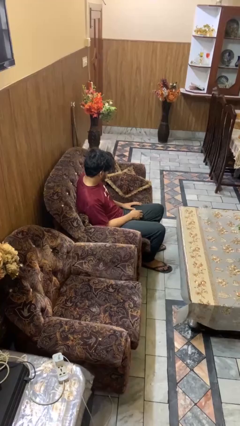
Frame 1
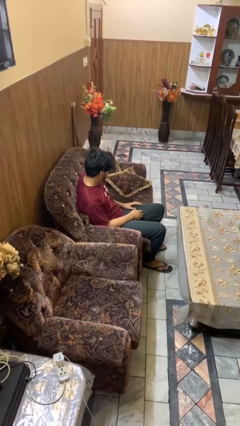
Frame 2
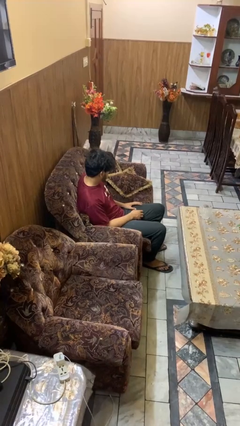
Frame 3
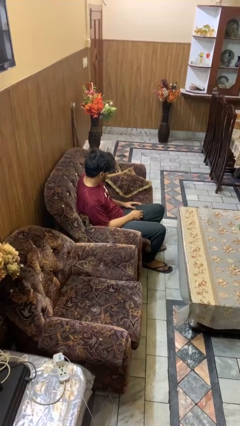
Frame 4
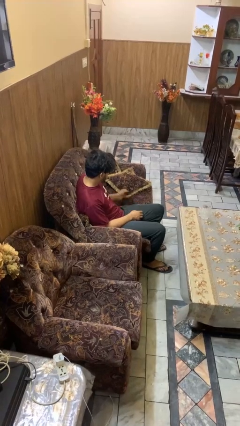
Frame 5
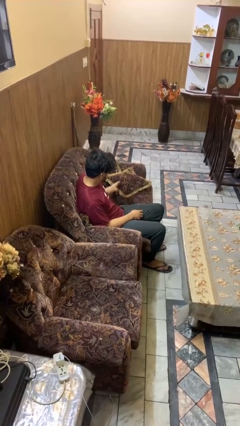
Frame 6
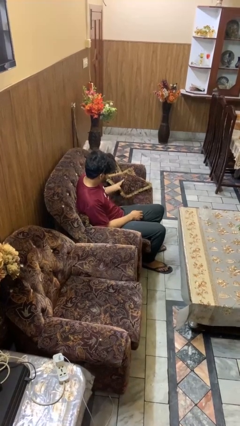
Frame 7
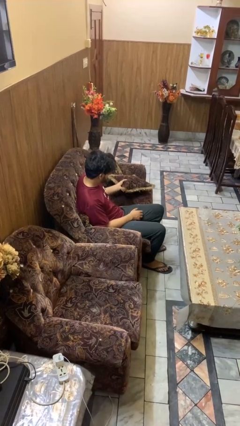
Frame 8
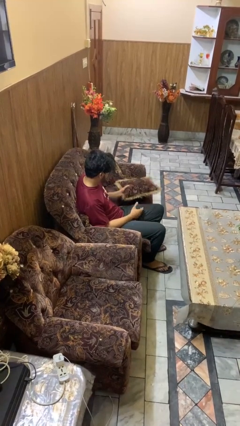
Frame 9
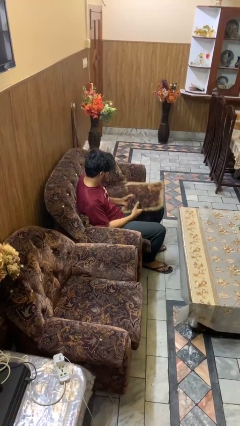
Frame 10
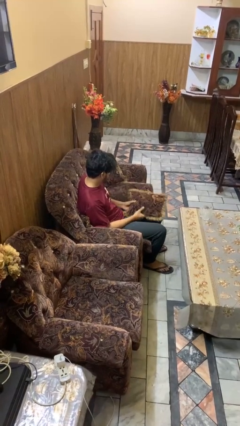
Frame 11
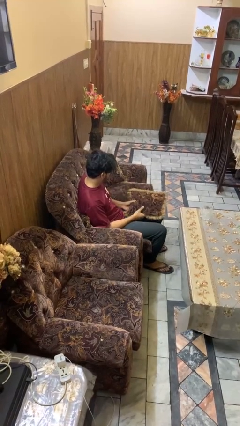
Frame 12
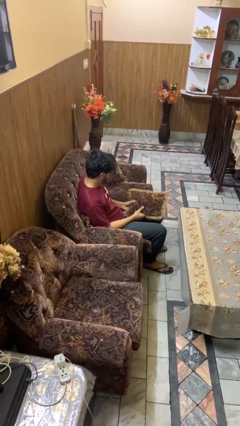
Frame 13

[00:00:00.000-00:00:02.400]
person picks up object from couch

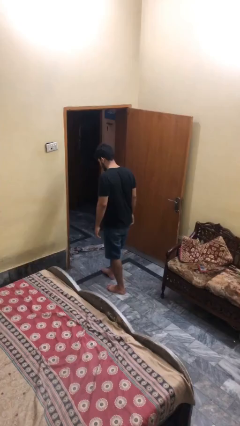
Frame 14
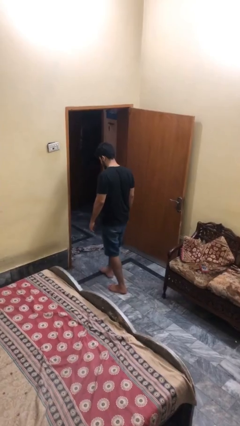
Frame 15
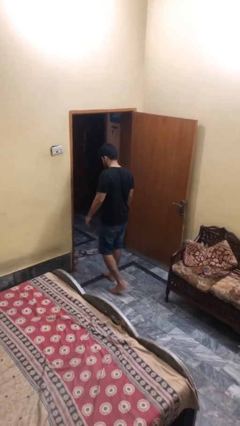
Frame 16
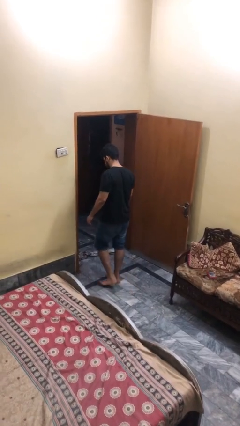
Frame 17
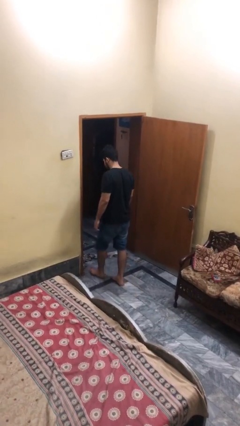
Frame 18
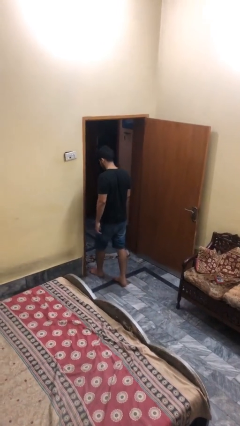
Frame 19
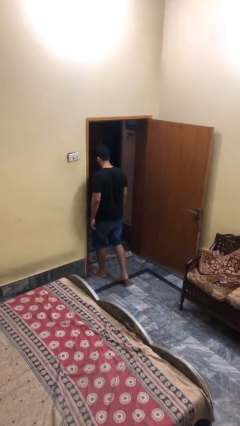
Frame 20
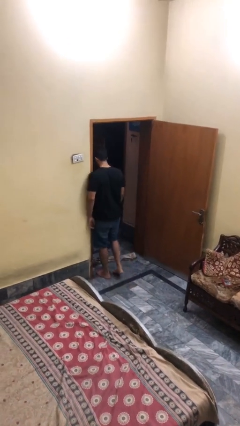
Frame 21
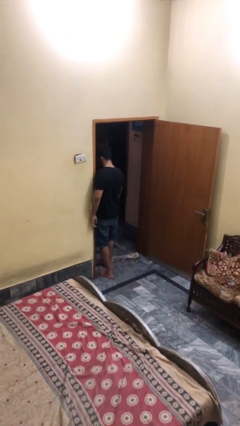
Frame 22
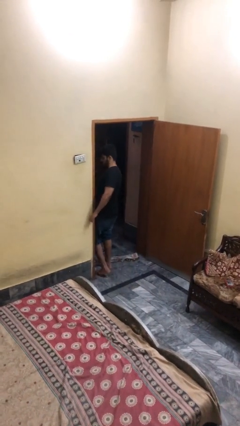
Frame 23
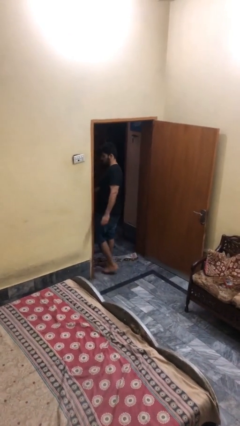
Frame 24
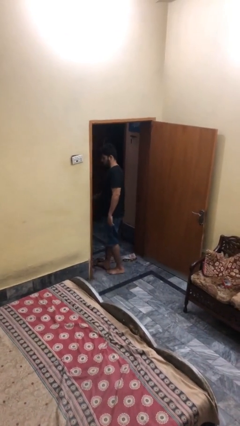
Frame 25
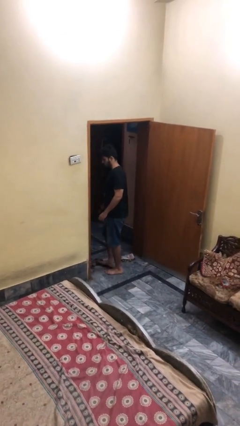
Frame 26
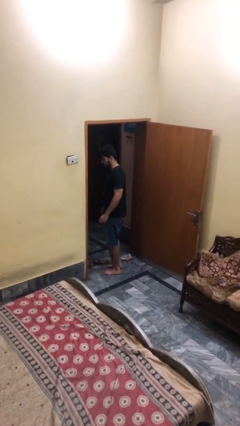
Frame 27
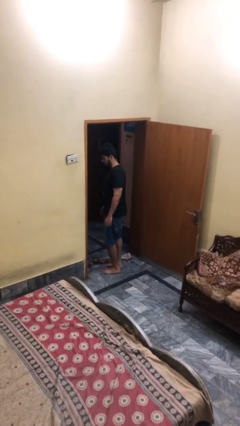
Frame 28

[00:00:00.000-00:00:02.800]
person bumps into wall

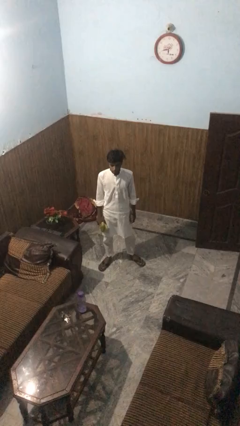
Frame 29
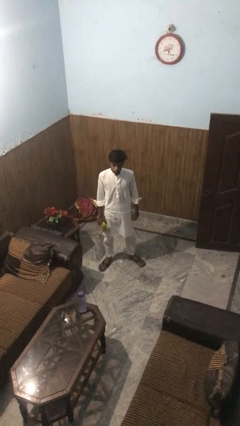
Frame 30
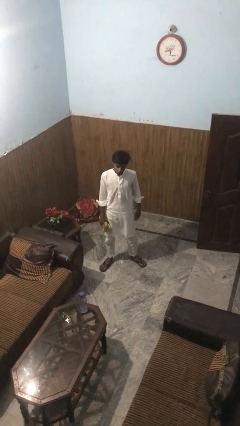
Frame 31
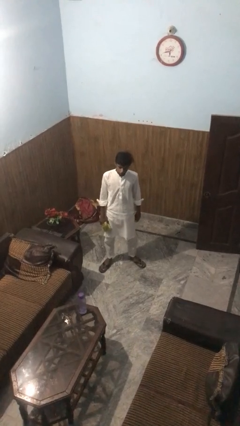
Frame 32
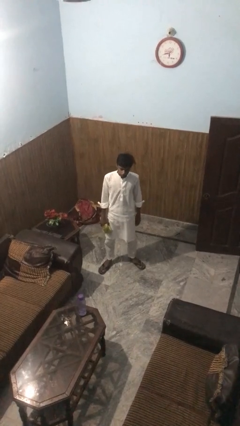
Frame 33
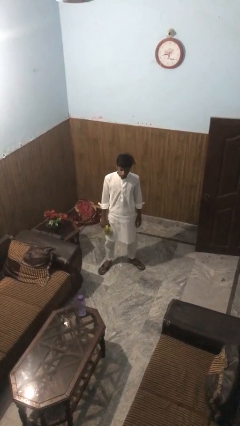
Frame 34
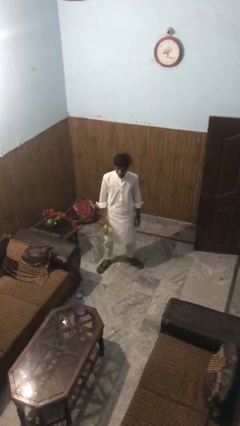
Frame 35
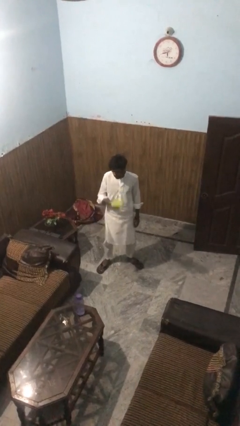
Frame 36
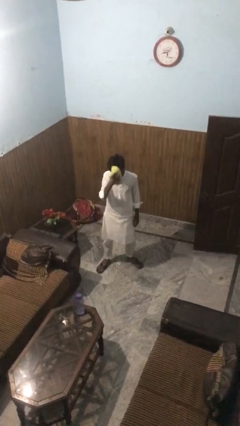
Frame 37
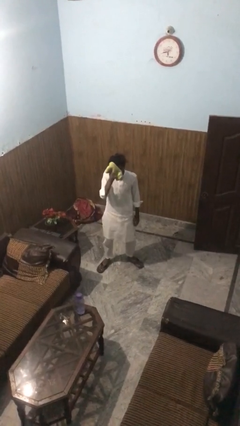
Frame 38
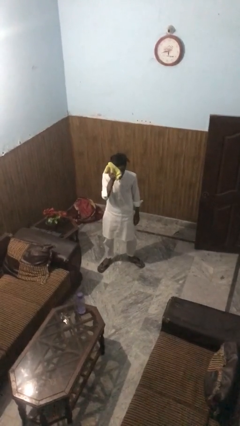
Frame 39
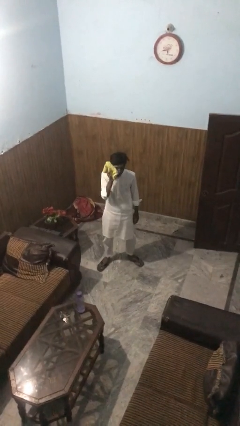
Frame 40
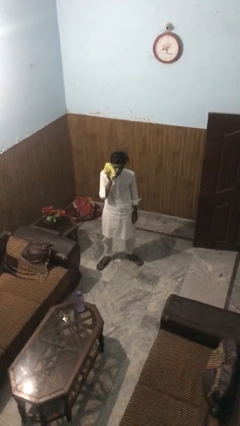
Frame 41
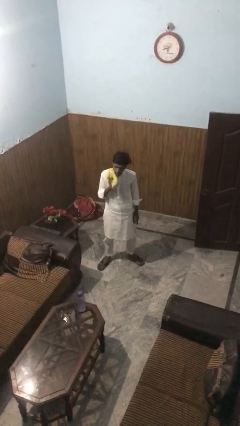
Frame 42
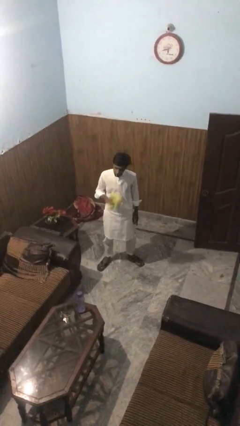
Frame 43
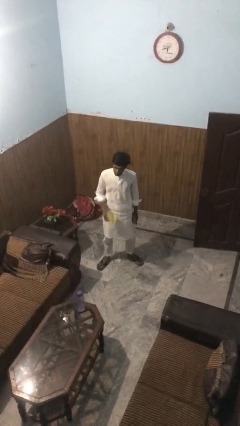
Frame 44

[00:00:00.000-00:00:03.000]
person wipes mouth with napkin

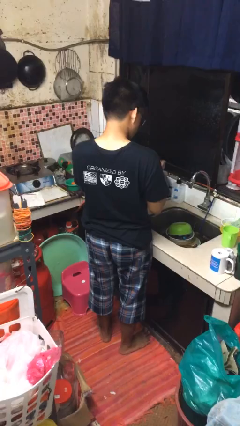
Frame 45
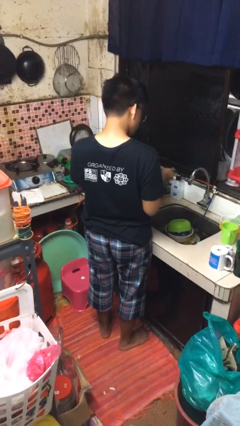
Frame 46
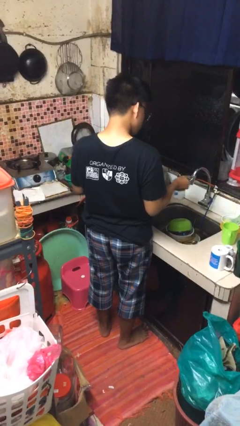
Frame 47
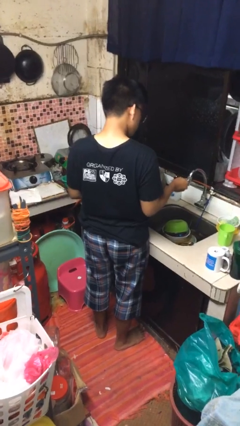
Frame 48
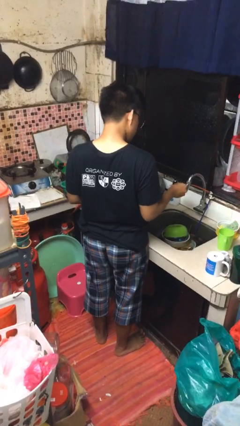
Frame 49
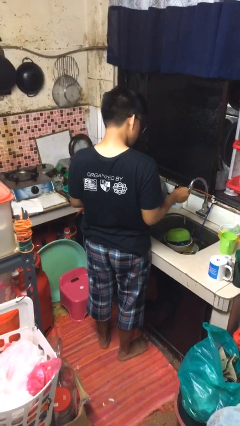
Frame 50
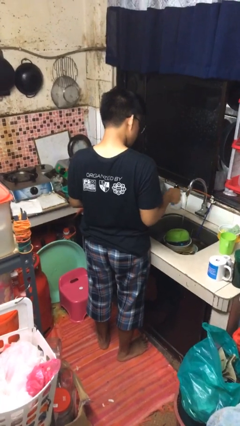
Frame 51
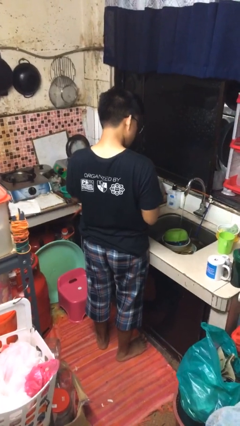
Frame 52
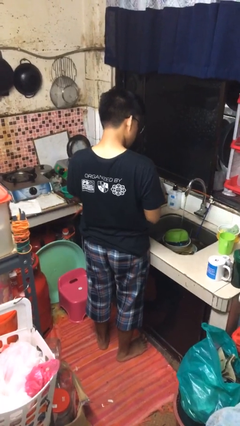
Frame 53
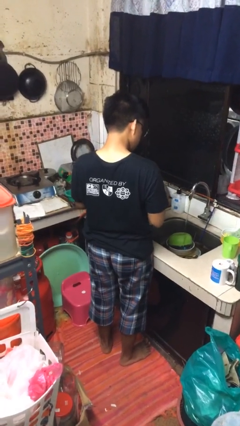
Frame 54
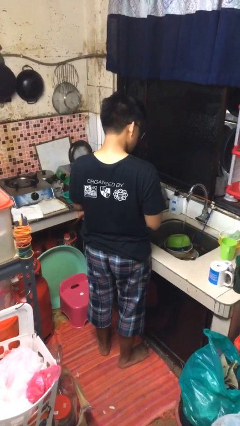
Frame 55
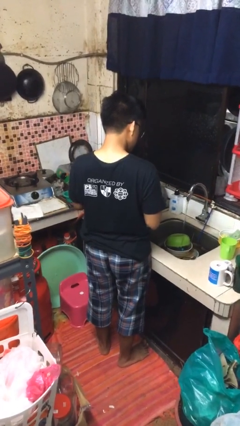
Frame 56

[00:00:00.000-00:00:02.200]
person turns on faucet

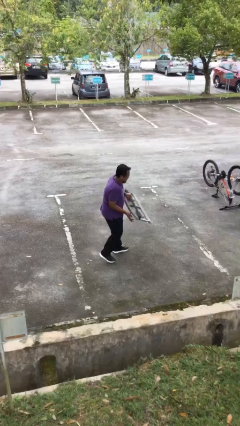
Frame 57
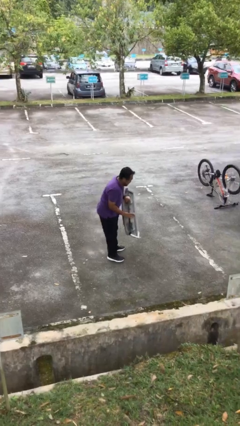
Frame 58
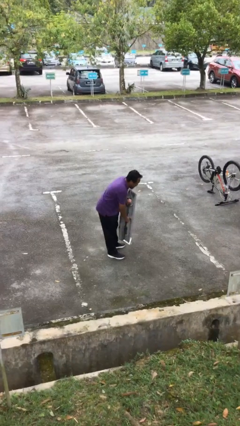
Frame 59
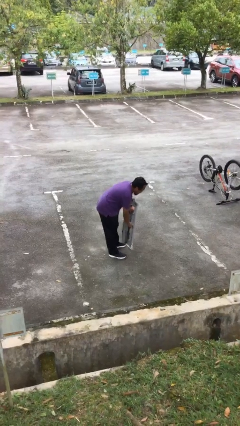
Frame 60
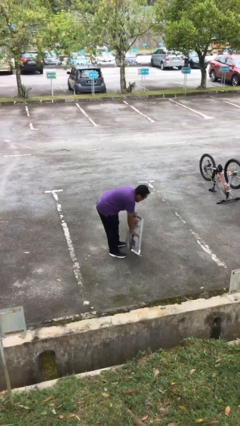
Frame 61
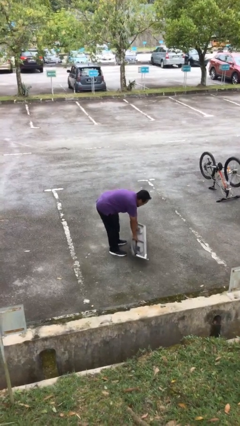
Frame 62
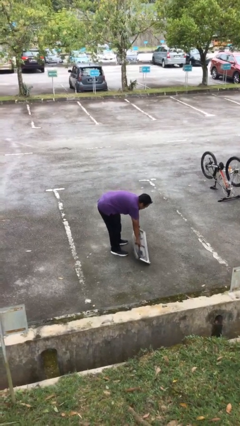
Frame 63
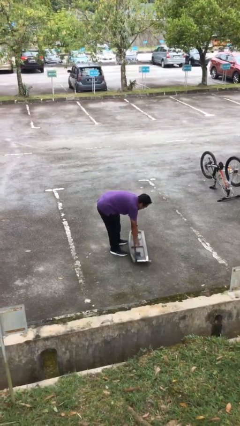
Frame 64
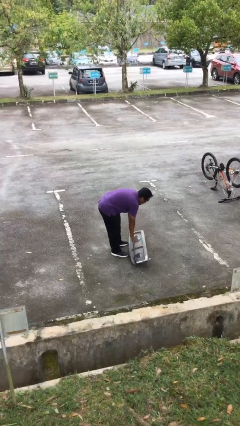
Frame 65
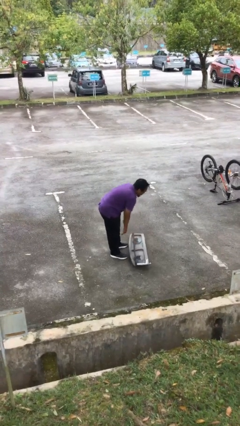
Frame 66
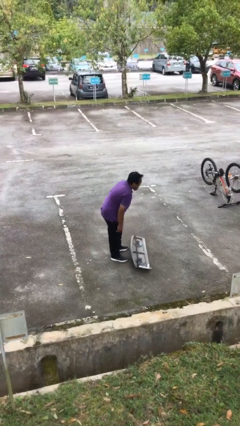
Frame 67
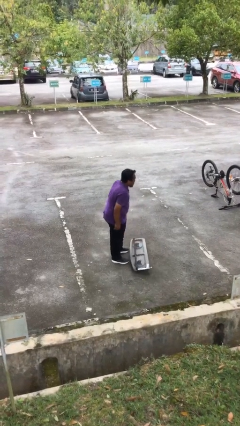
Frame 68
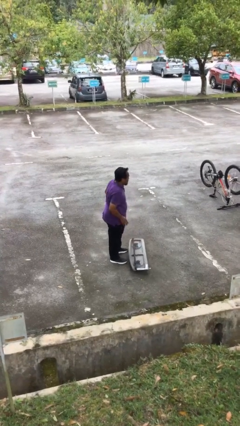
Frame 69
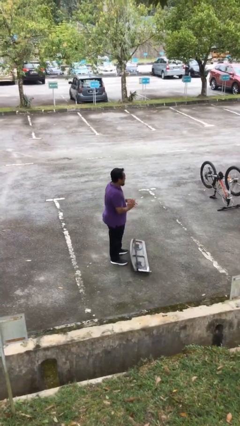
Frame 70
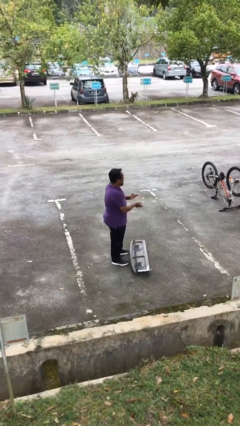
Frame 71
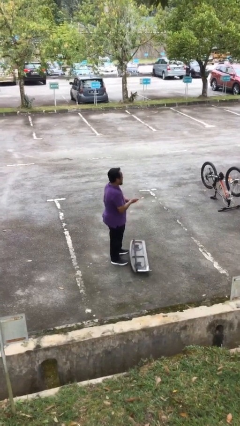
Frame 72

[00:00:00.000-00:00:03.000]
person puts down object on floor

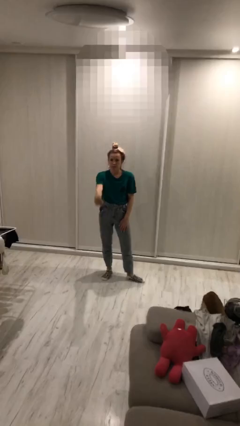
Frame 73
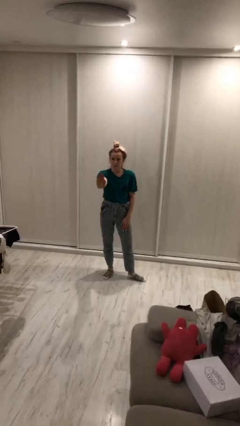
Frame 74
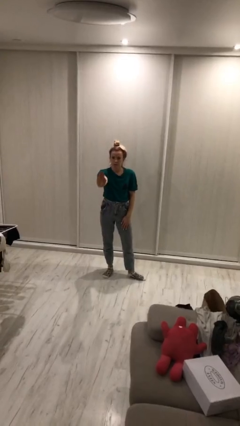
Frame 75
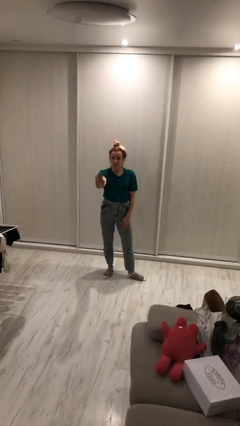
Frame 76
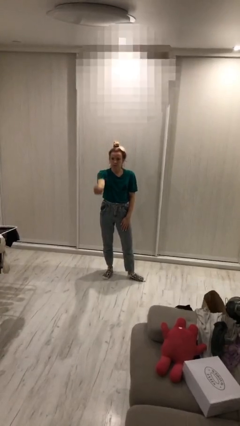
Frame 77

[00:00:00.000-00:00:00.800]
person gestures stop

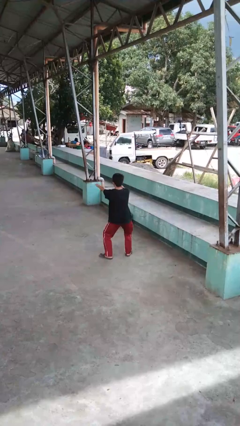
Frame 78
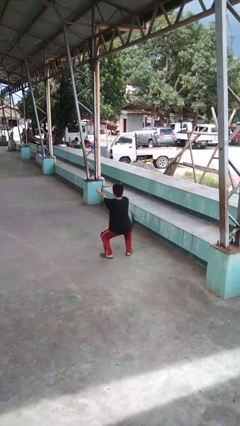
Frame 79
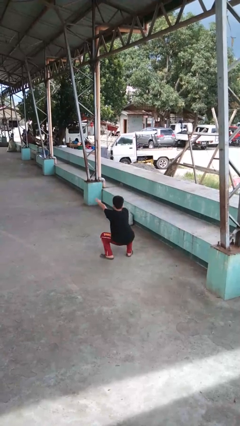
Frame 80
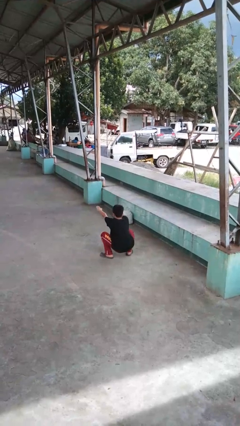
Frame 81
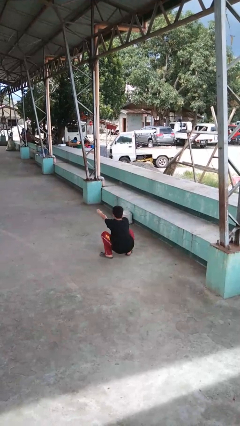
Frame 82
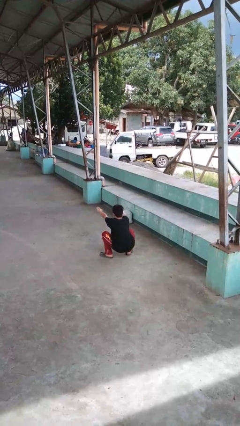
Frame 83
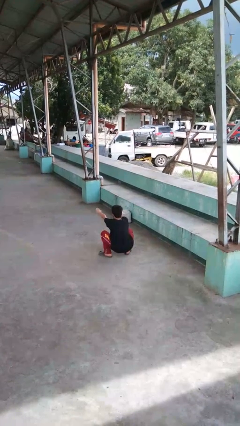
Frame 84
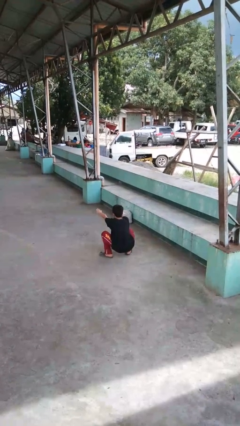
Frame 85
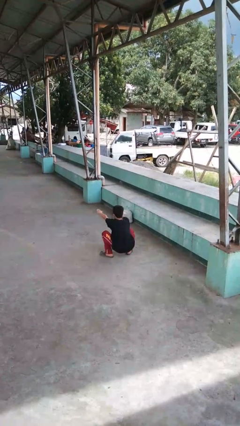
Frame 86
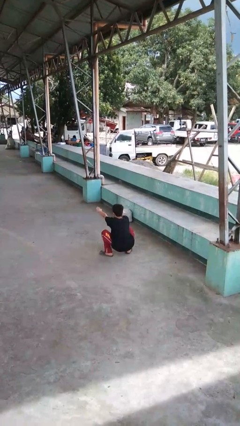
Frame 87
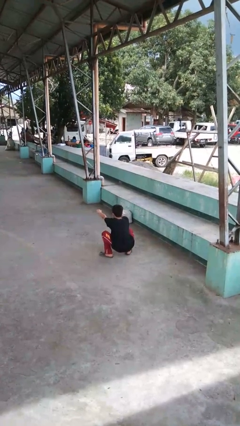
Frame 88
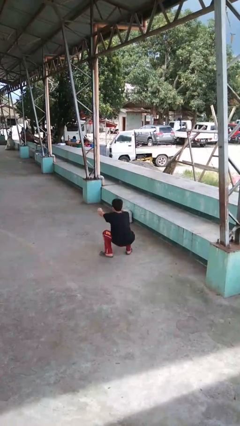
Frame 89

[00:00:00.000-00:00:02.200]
person squats

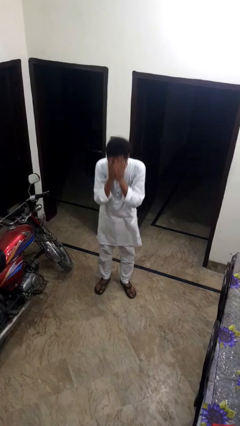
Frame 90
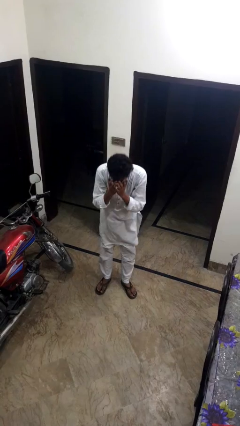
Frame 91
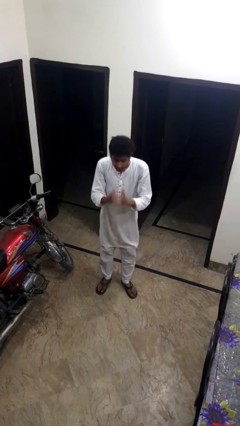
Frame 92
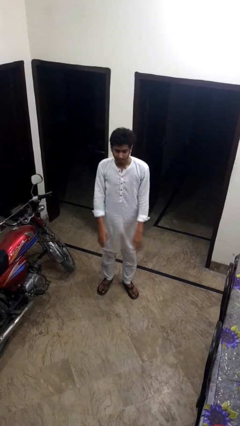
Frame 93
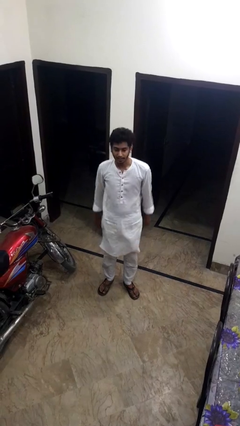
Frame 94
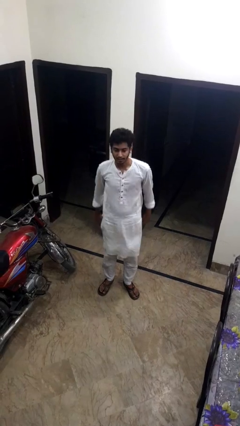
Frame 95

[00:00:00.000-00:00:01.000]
person sneezes into hand
